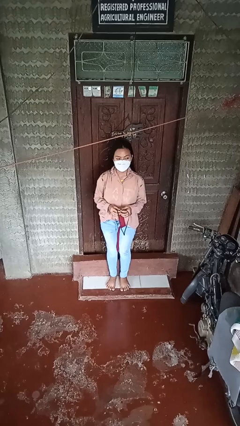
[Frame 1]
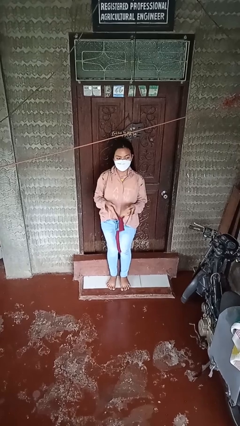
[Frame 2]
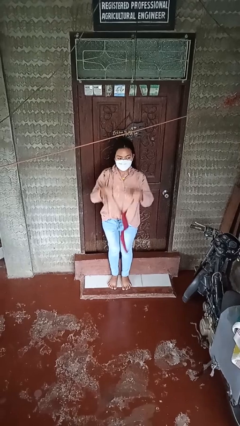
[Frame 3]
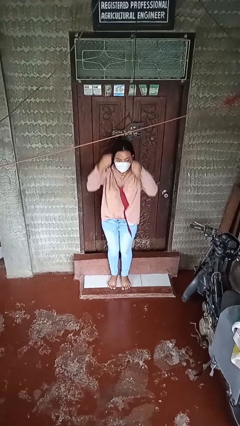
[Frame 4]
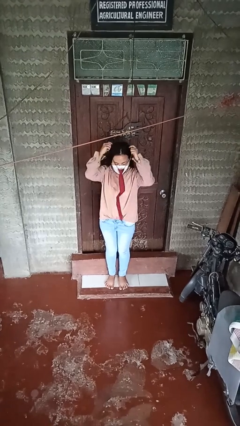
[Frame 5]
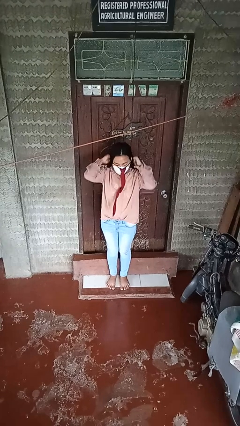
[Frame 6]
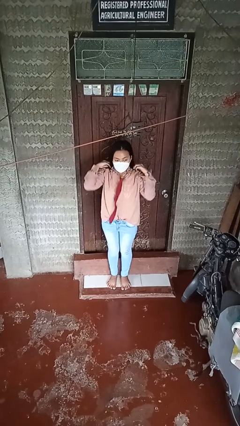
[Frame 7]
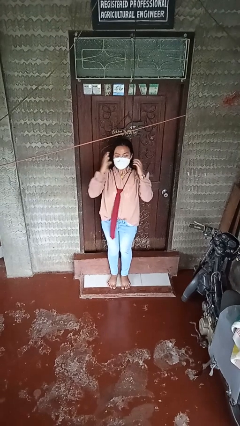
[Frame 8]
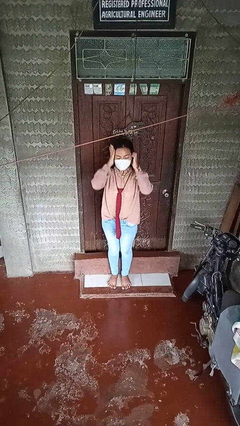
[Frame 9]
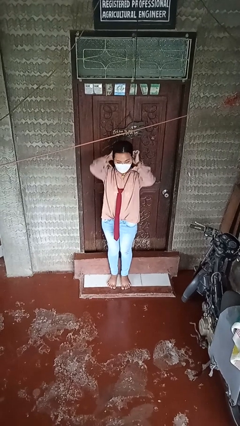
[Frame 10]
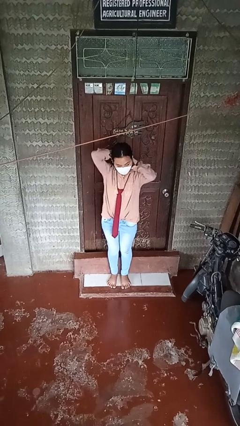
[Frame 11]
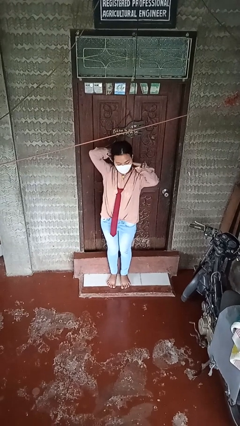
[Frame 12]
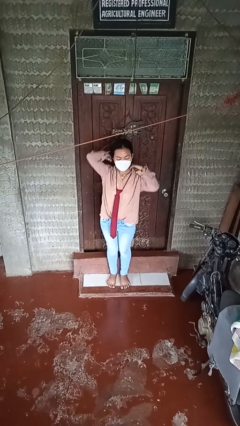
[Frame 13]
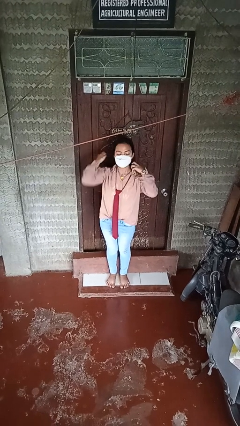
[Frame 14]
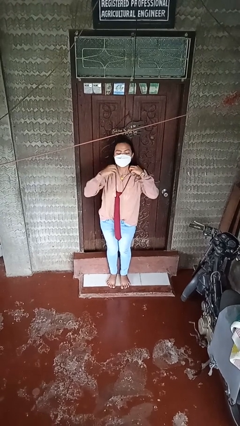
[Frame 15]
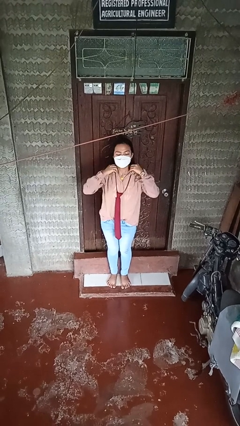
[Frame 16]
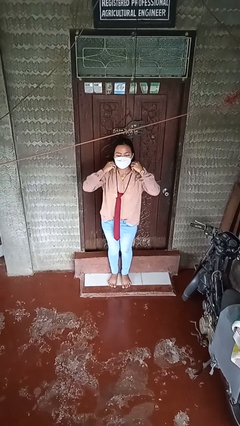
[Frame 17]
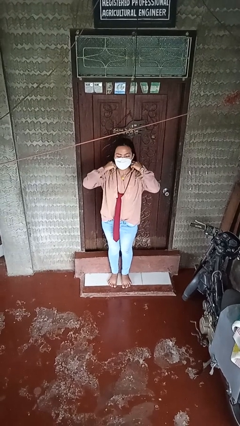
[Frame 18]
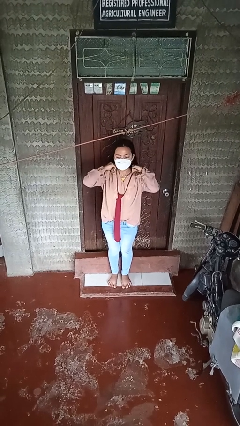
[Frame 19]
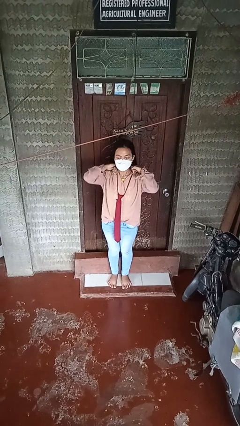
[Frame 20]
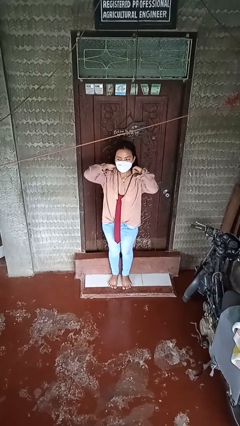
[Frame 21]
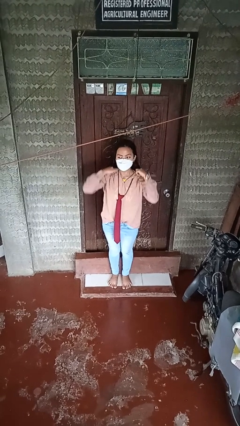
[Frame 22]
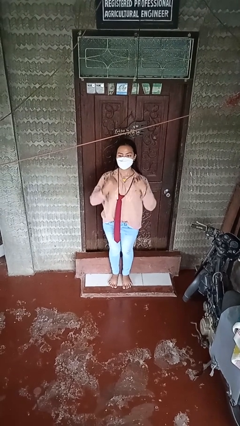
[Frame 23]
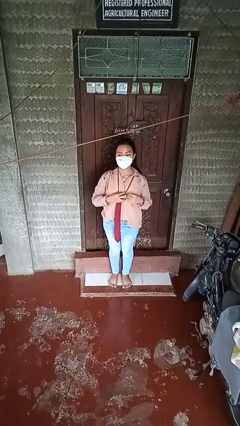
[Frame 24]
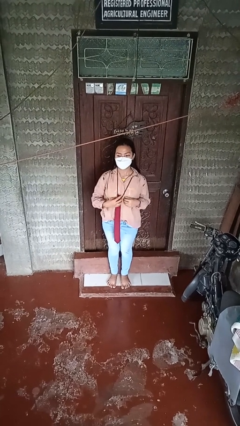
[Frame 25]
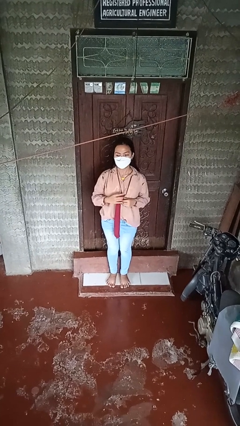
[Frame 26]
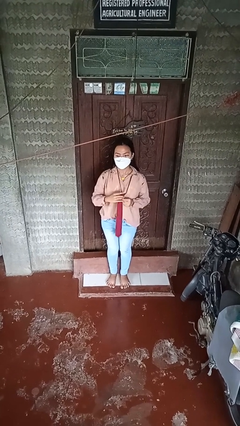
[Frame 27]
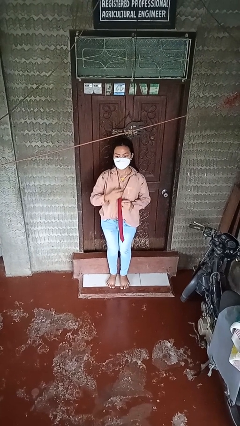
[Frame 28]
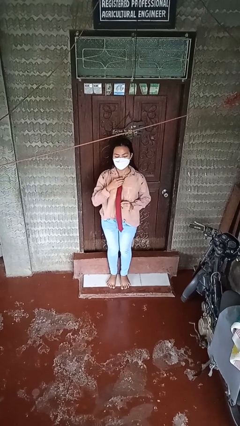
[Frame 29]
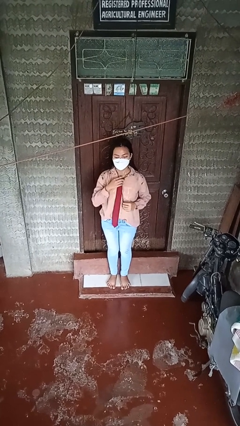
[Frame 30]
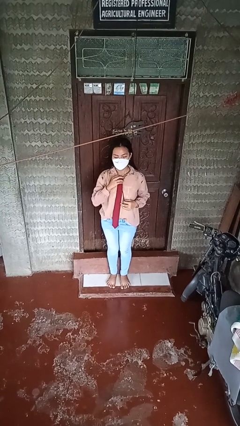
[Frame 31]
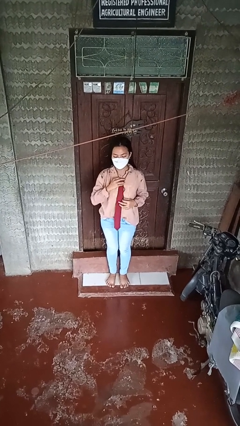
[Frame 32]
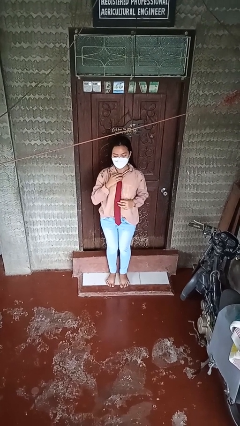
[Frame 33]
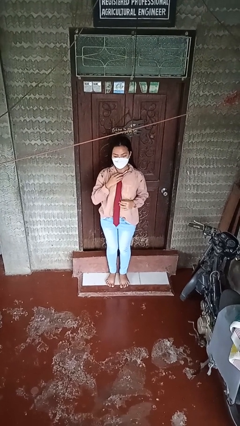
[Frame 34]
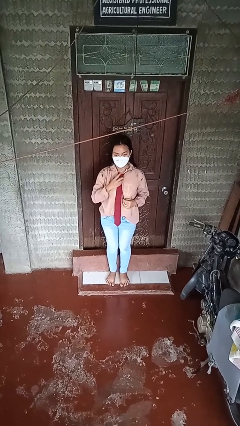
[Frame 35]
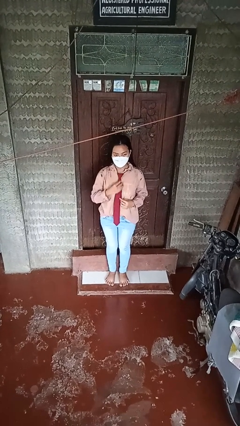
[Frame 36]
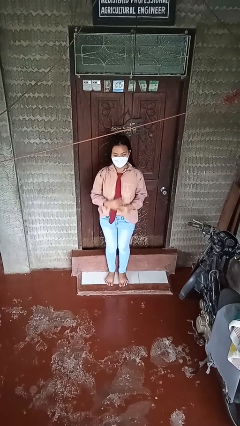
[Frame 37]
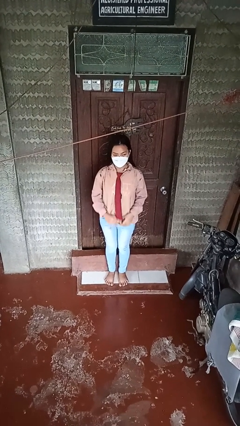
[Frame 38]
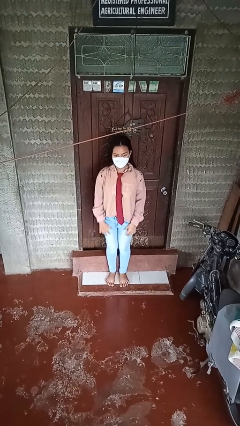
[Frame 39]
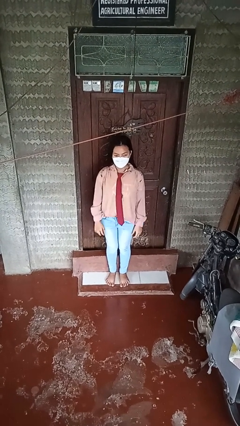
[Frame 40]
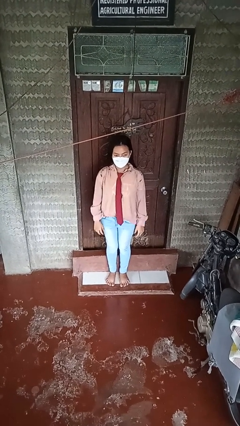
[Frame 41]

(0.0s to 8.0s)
person puts on necktie

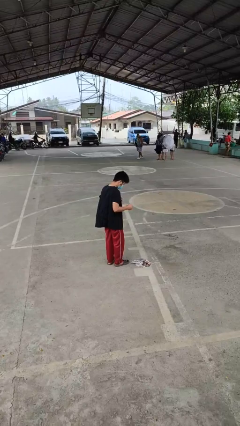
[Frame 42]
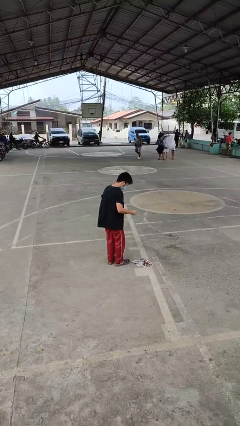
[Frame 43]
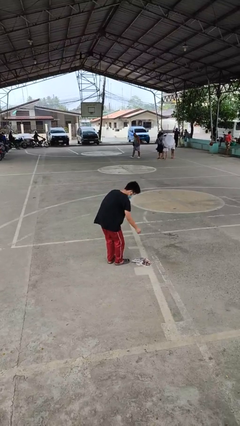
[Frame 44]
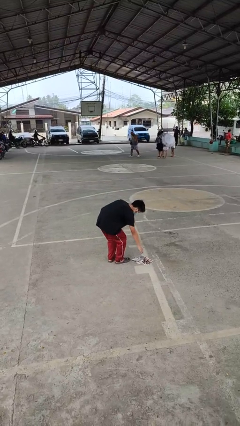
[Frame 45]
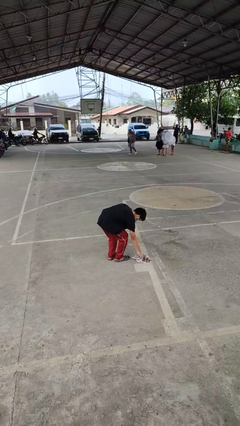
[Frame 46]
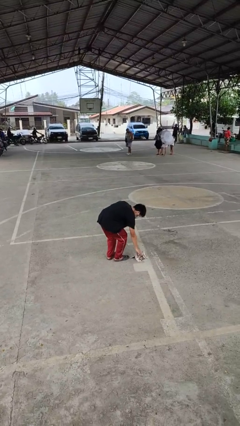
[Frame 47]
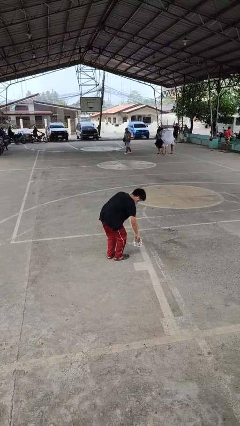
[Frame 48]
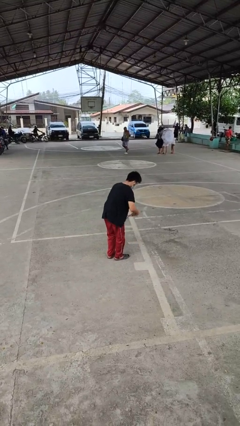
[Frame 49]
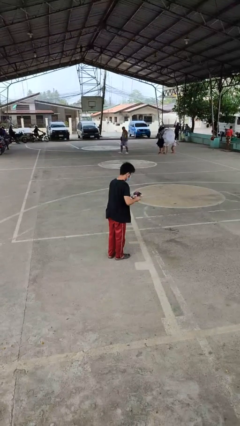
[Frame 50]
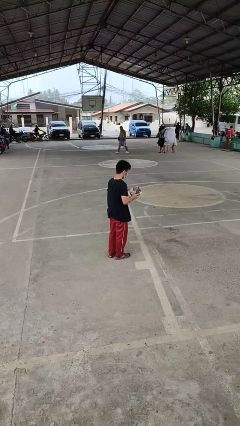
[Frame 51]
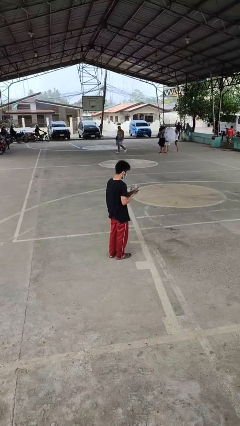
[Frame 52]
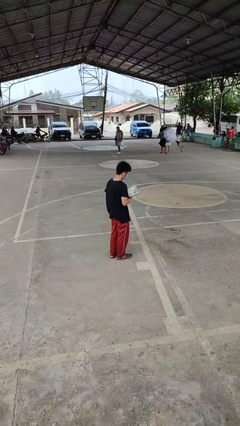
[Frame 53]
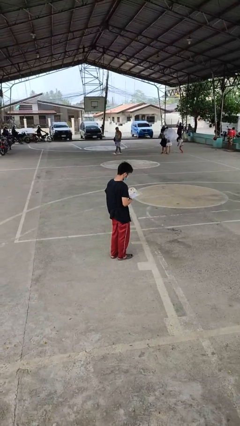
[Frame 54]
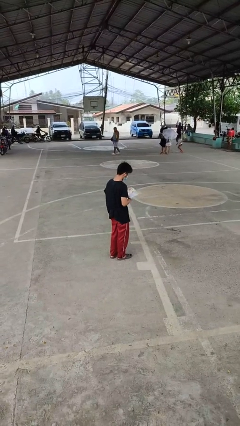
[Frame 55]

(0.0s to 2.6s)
person picks up object from floor

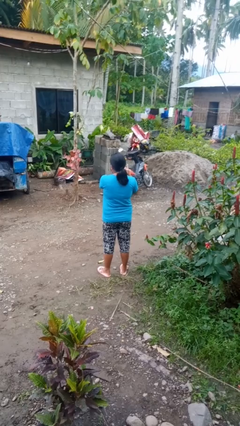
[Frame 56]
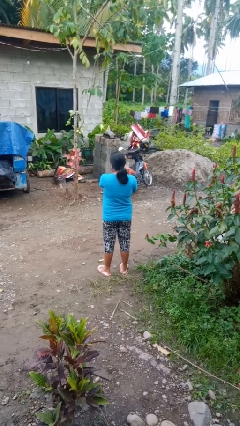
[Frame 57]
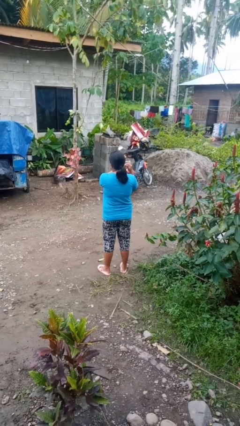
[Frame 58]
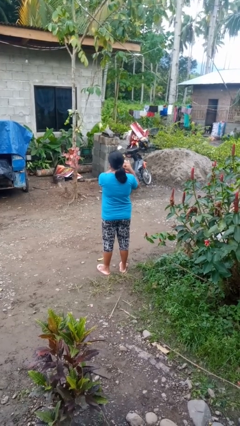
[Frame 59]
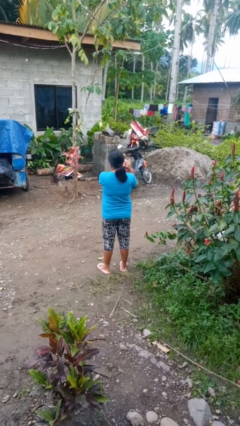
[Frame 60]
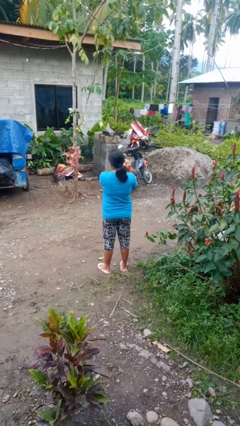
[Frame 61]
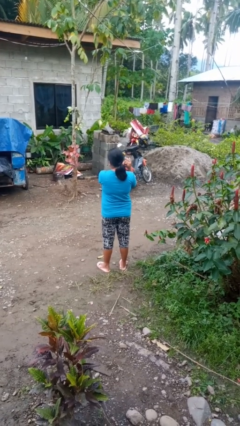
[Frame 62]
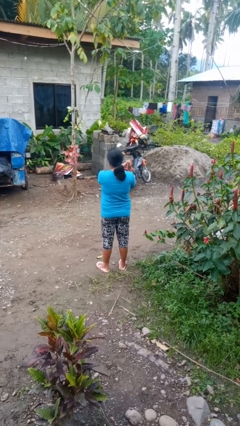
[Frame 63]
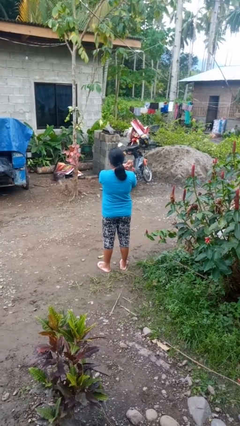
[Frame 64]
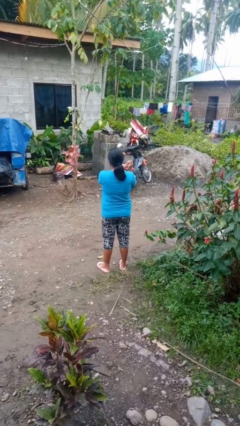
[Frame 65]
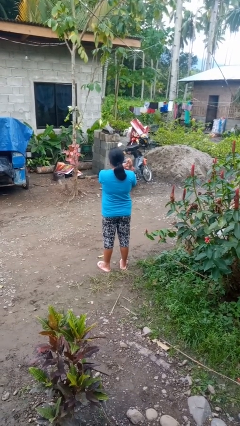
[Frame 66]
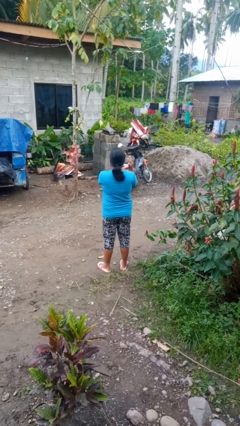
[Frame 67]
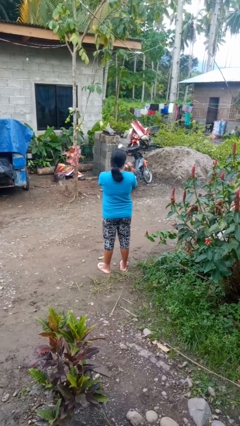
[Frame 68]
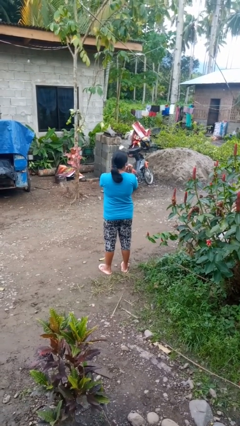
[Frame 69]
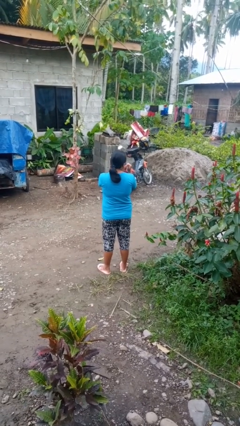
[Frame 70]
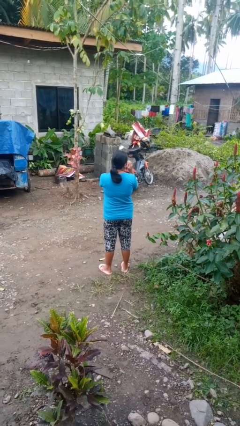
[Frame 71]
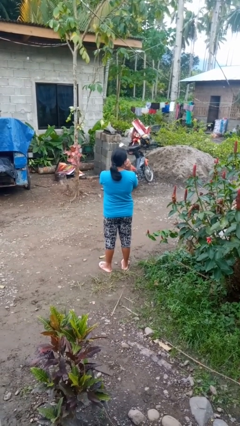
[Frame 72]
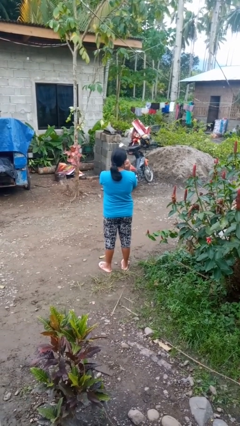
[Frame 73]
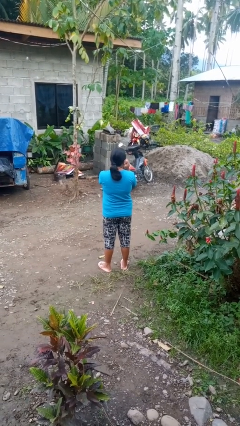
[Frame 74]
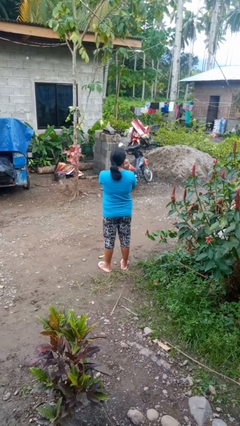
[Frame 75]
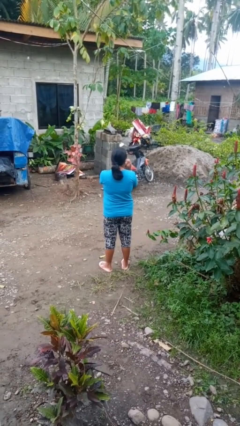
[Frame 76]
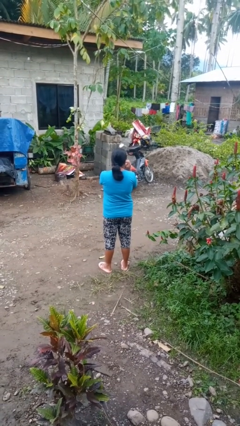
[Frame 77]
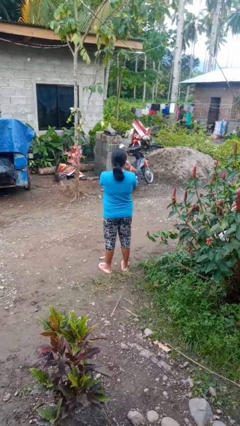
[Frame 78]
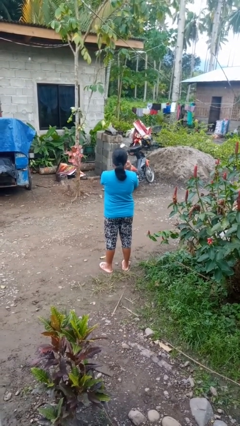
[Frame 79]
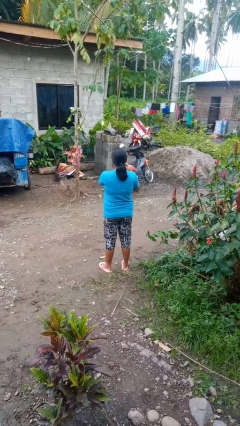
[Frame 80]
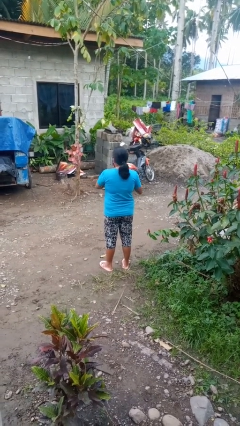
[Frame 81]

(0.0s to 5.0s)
person cracks knuckles

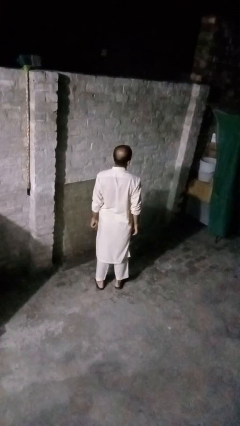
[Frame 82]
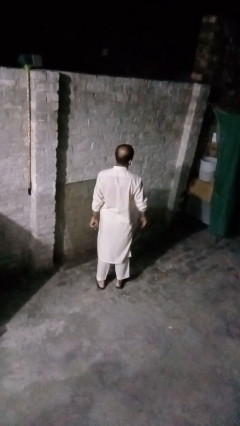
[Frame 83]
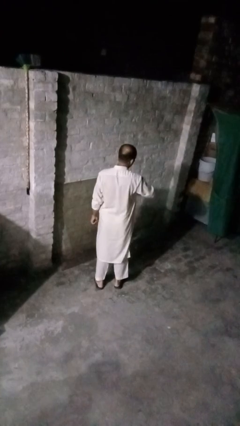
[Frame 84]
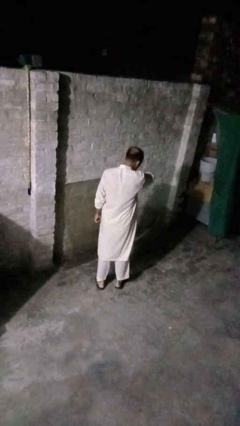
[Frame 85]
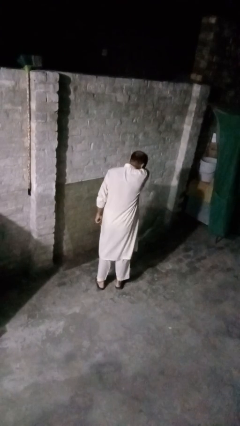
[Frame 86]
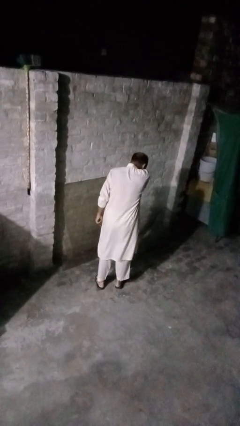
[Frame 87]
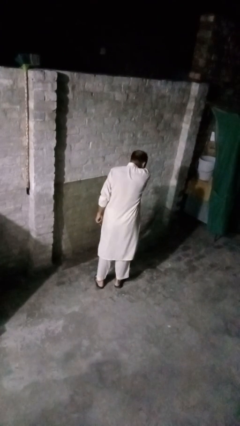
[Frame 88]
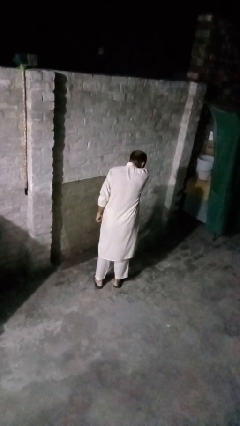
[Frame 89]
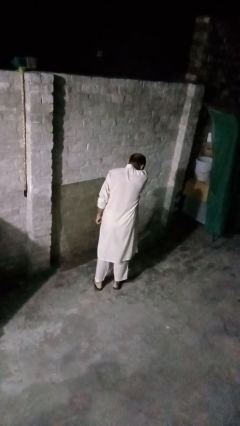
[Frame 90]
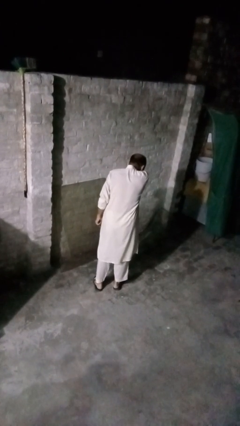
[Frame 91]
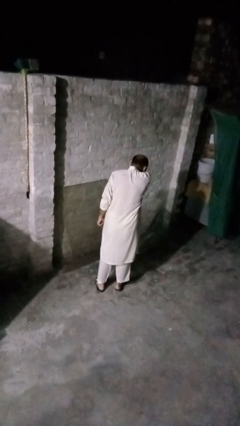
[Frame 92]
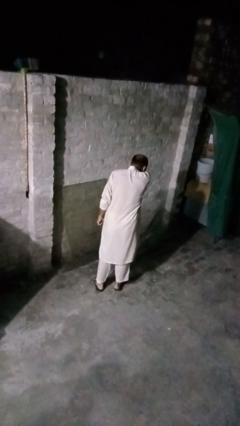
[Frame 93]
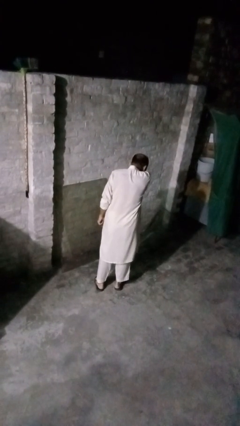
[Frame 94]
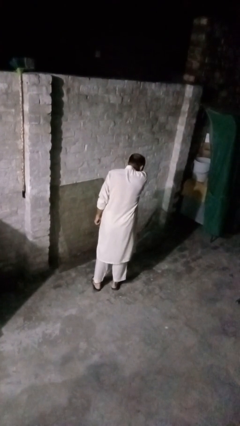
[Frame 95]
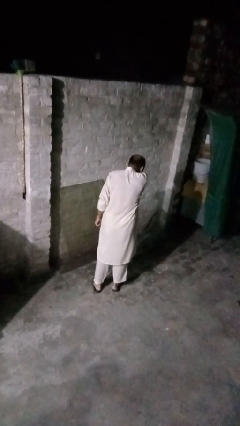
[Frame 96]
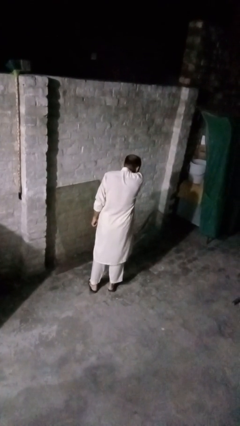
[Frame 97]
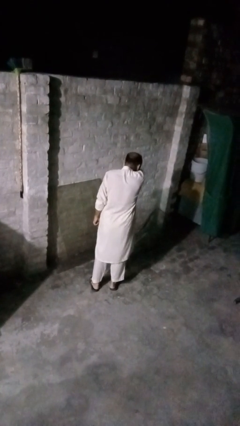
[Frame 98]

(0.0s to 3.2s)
person sneezes into arm
